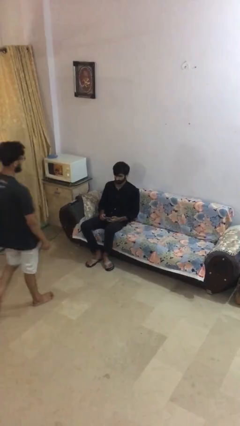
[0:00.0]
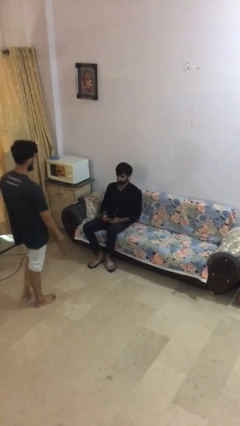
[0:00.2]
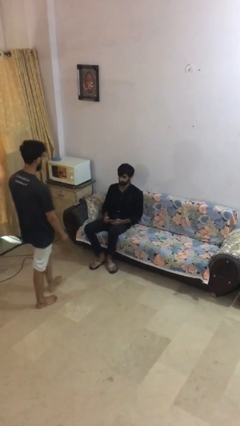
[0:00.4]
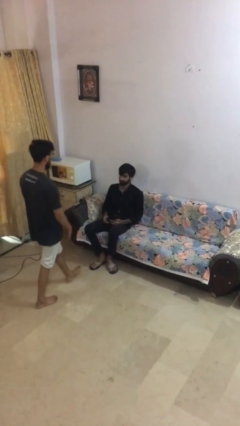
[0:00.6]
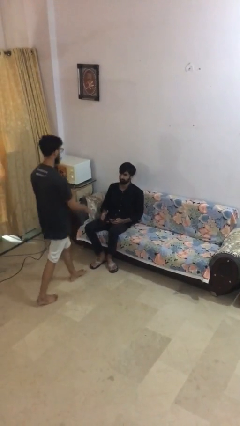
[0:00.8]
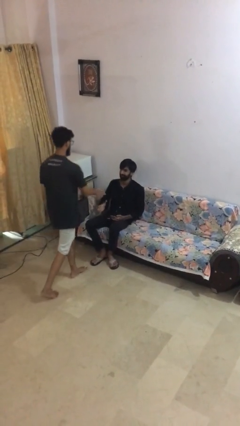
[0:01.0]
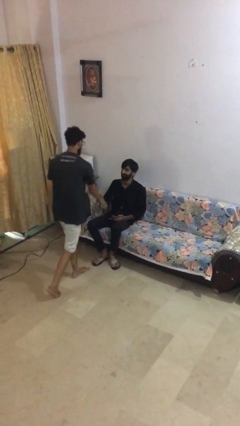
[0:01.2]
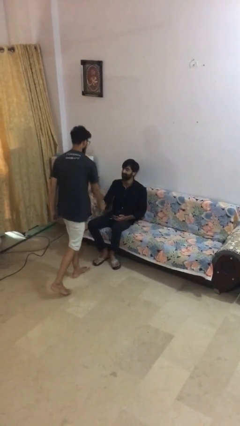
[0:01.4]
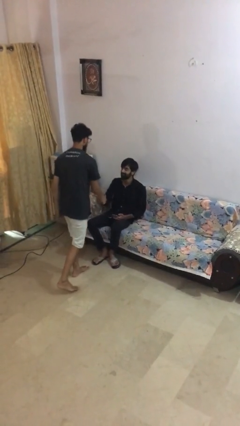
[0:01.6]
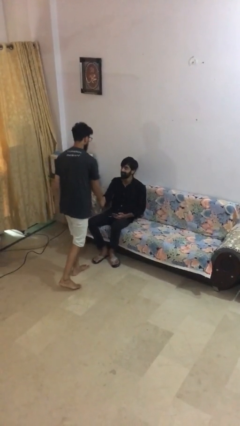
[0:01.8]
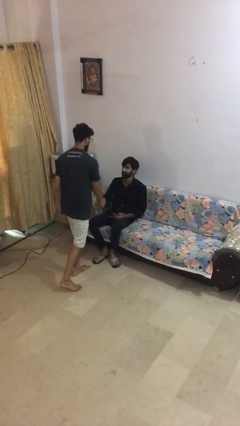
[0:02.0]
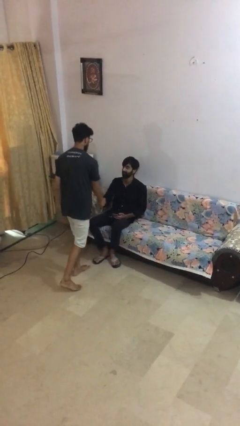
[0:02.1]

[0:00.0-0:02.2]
person shakes hand

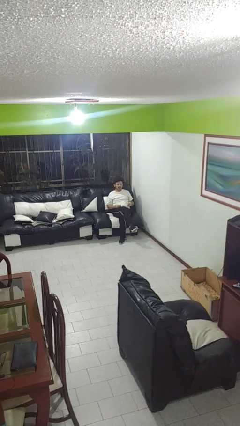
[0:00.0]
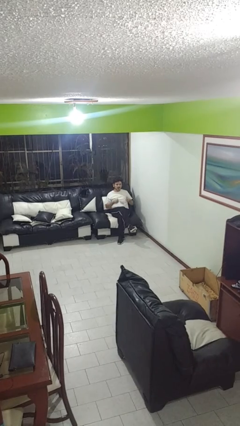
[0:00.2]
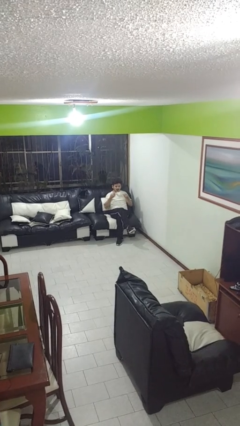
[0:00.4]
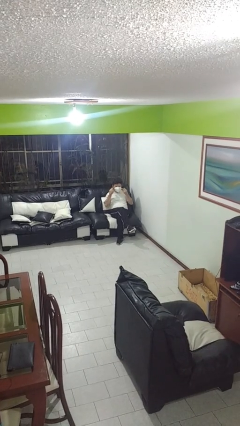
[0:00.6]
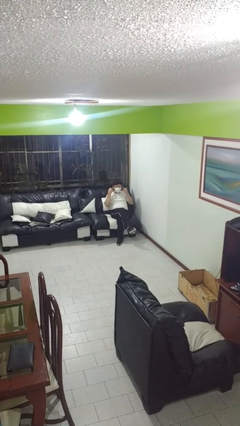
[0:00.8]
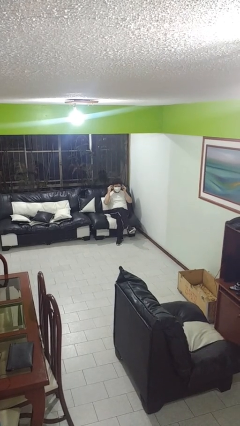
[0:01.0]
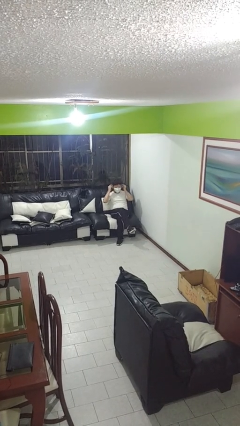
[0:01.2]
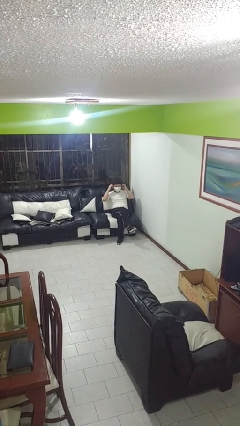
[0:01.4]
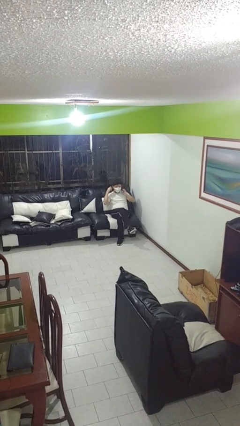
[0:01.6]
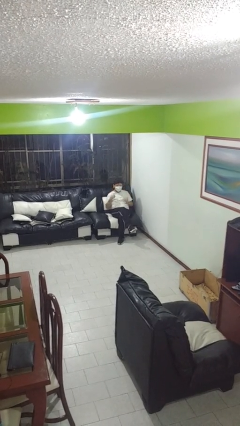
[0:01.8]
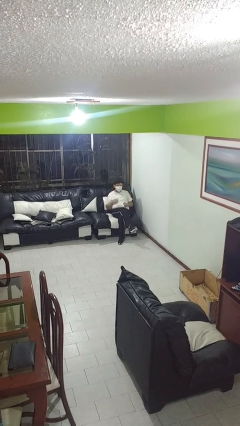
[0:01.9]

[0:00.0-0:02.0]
person puts on facemask

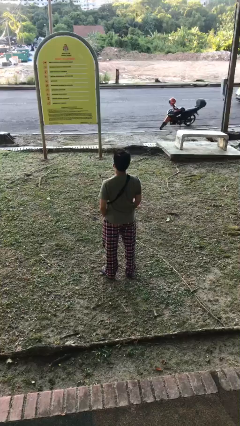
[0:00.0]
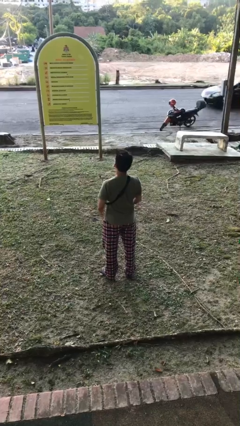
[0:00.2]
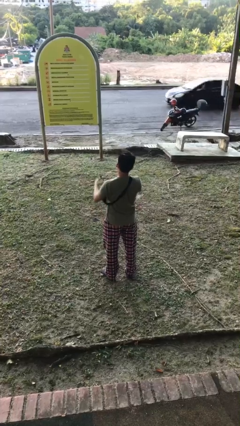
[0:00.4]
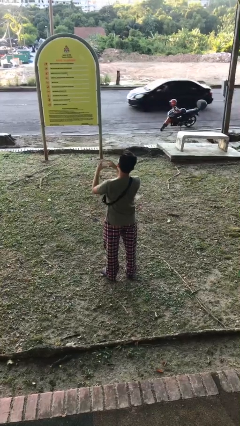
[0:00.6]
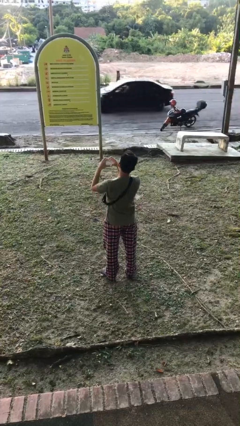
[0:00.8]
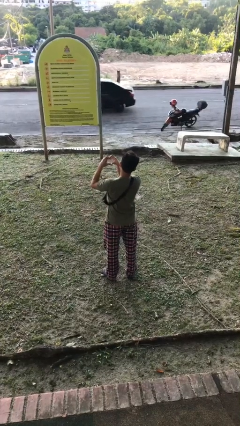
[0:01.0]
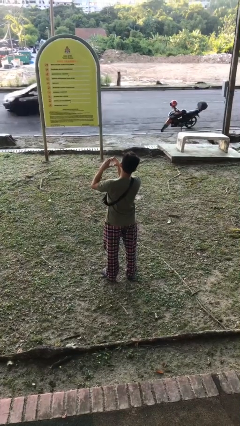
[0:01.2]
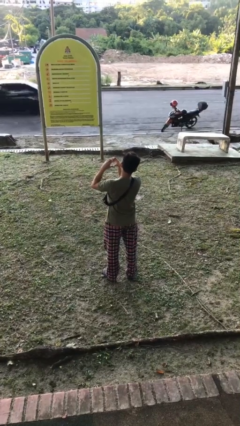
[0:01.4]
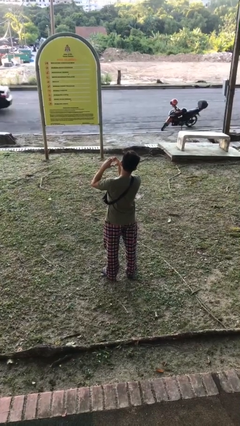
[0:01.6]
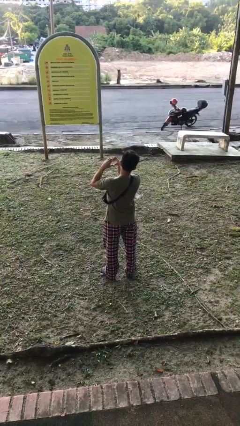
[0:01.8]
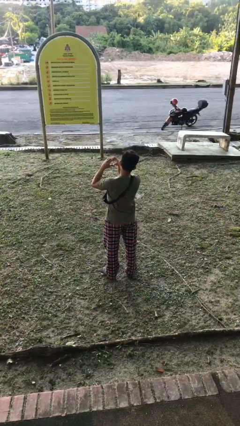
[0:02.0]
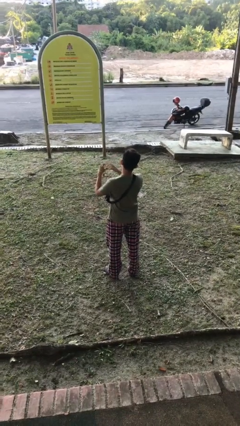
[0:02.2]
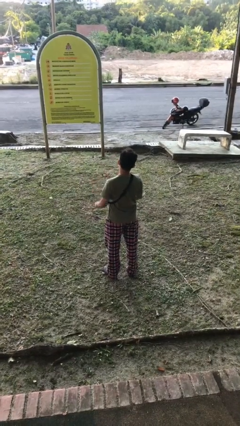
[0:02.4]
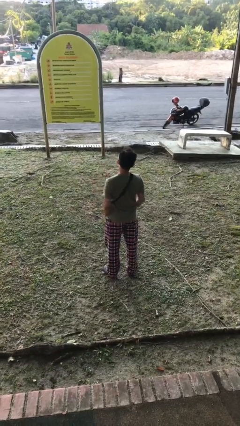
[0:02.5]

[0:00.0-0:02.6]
person gestures heart

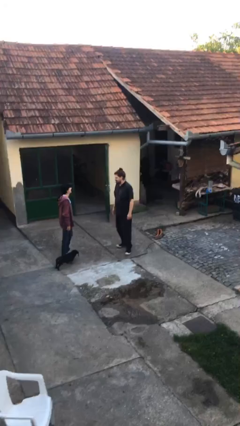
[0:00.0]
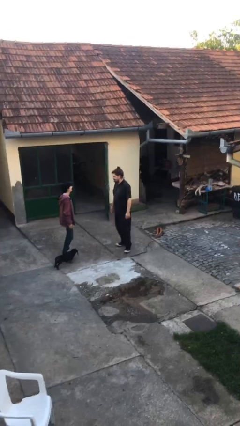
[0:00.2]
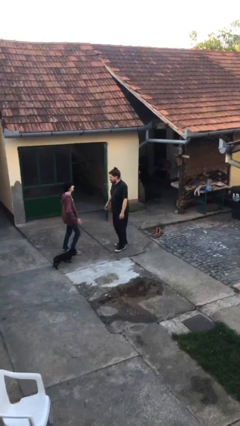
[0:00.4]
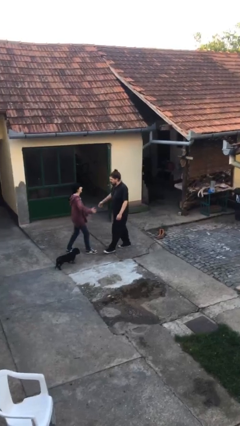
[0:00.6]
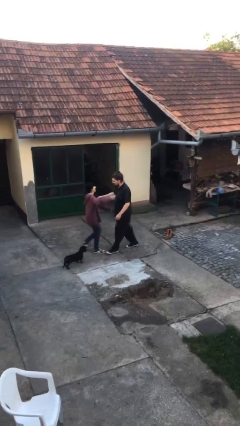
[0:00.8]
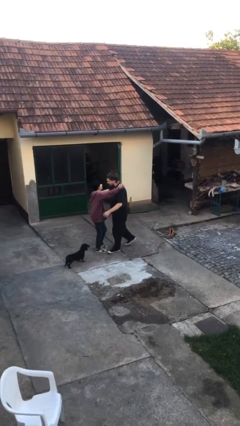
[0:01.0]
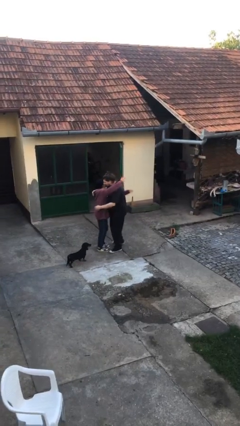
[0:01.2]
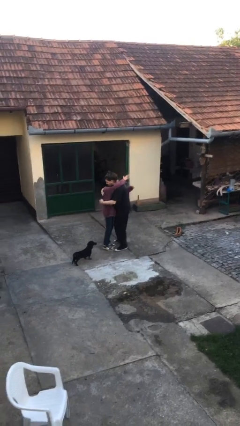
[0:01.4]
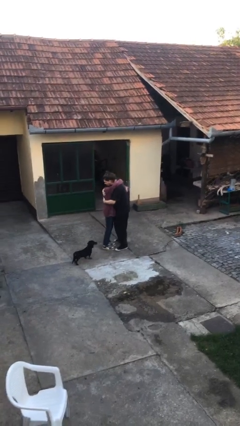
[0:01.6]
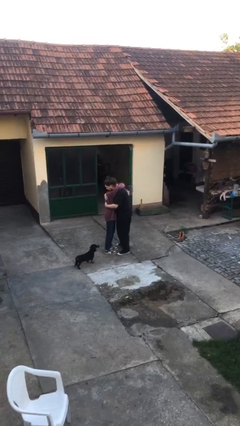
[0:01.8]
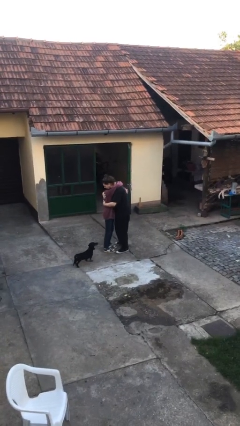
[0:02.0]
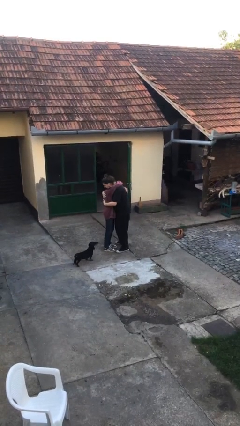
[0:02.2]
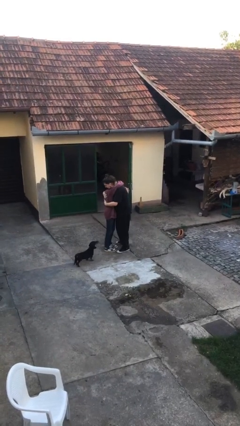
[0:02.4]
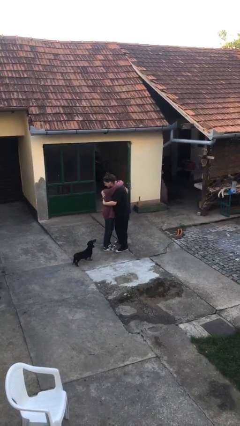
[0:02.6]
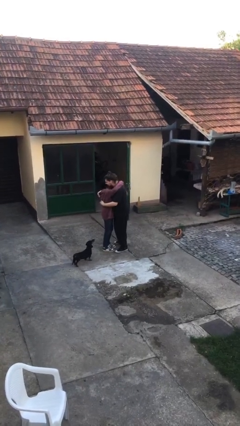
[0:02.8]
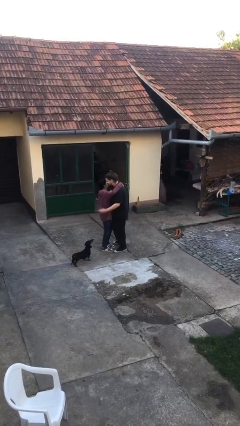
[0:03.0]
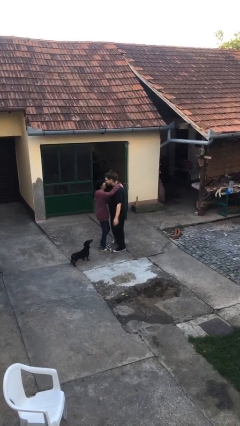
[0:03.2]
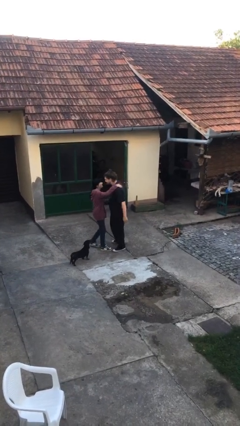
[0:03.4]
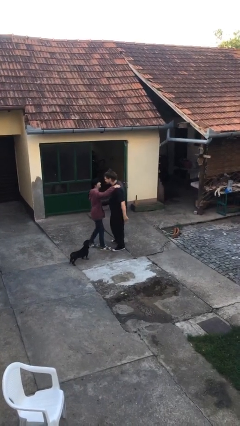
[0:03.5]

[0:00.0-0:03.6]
person embraces person

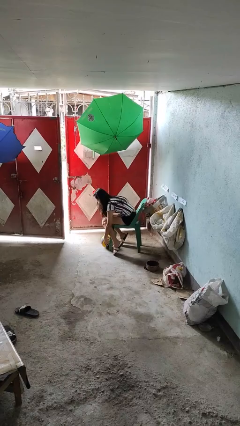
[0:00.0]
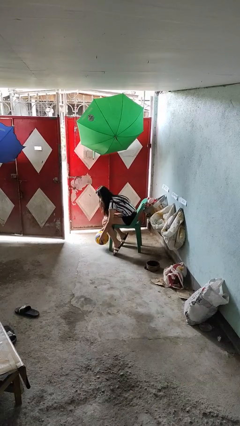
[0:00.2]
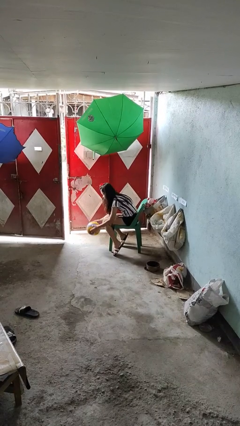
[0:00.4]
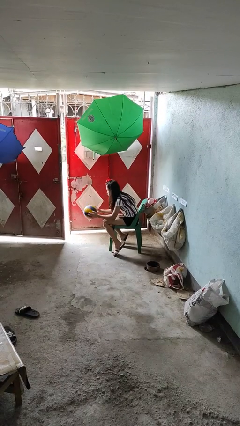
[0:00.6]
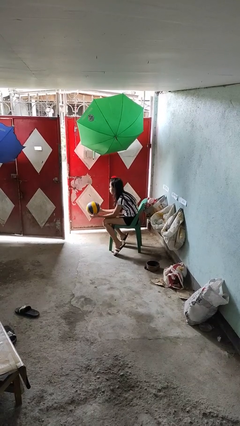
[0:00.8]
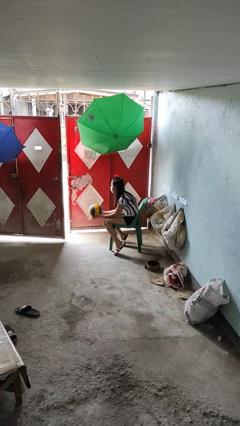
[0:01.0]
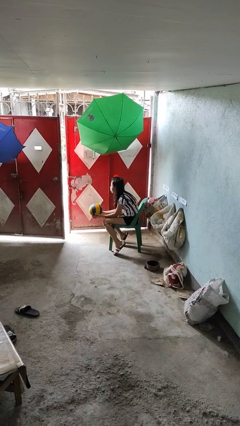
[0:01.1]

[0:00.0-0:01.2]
person picks up object from floor

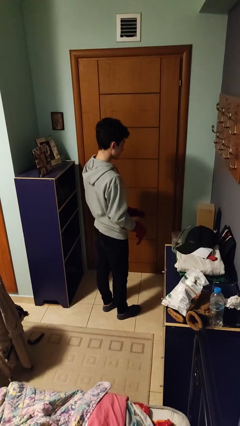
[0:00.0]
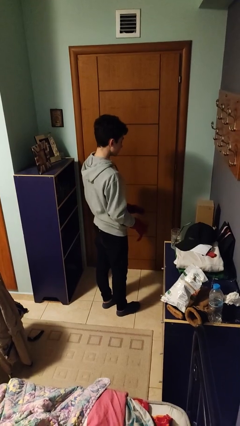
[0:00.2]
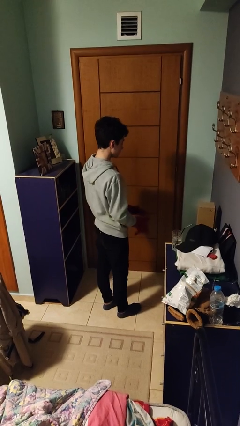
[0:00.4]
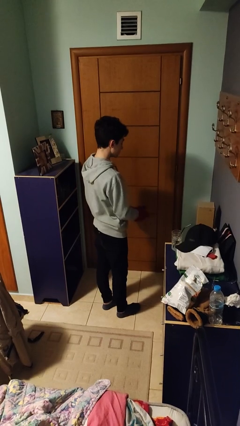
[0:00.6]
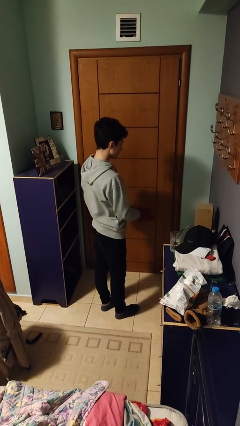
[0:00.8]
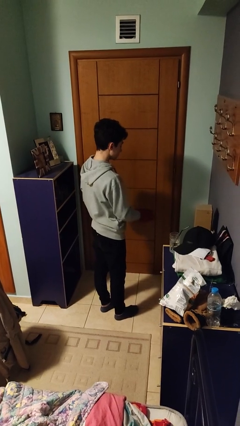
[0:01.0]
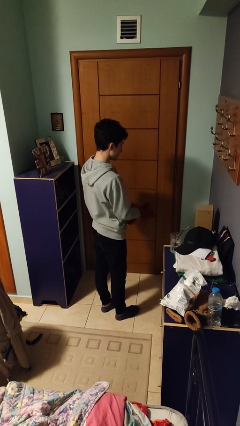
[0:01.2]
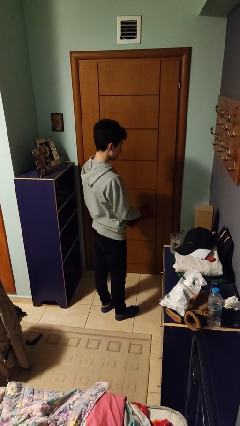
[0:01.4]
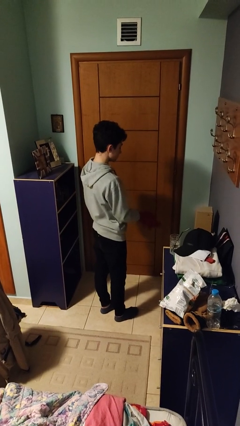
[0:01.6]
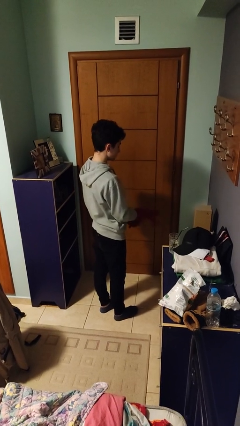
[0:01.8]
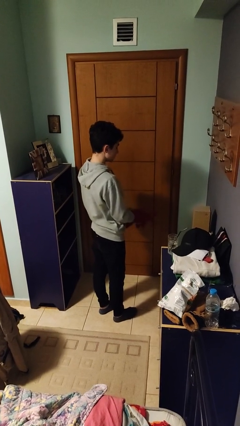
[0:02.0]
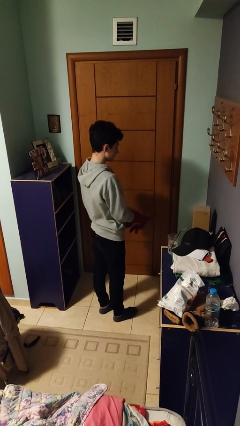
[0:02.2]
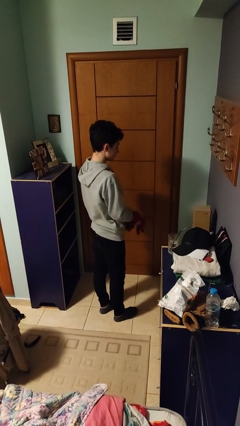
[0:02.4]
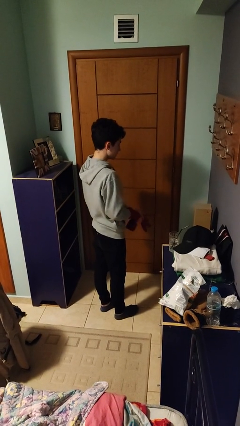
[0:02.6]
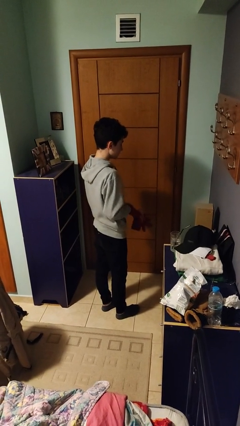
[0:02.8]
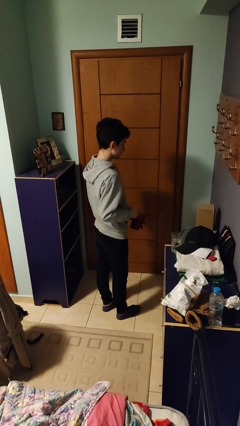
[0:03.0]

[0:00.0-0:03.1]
person takes off gloves

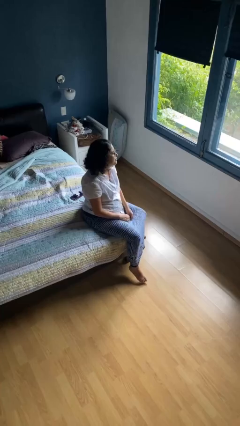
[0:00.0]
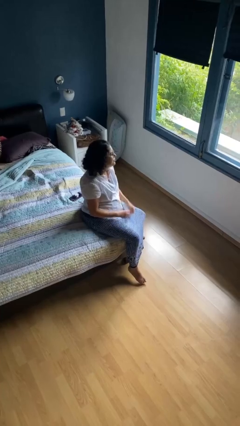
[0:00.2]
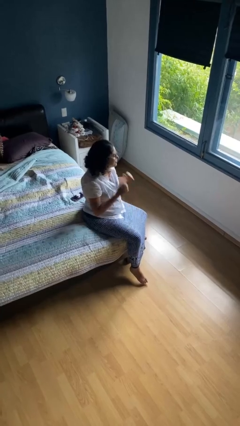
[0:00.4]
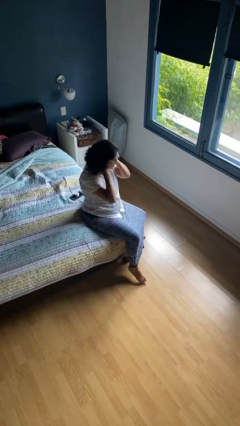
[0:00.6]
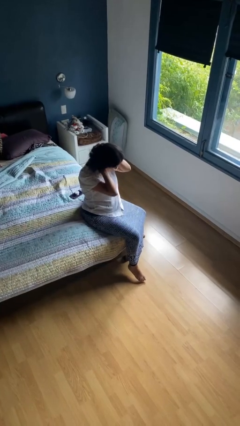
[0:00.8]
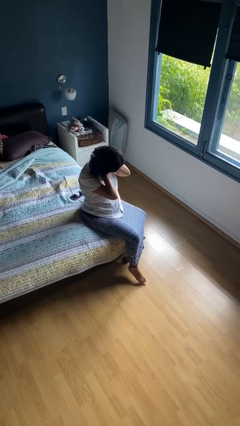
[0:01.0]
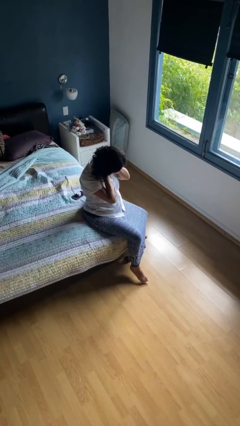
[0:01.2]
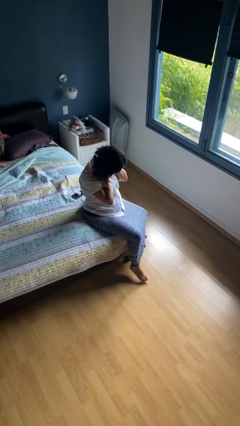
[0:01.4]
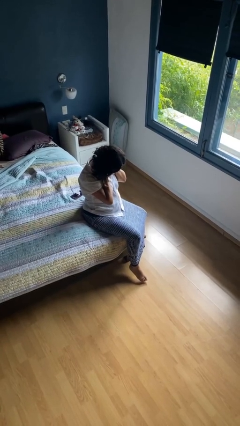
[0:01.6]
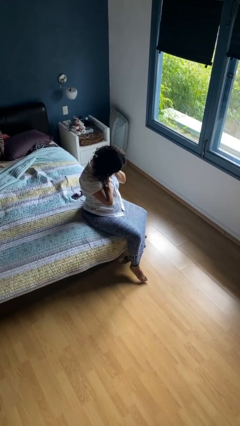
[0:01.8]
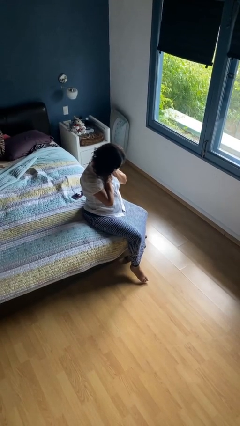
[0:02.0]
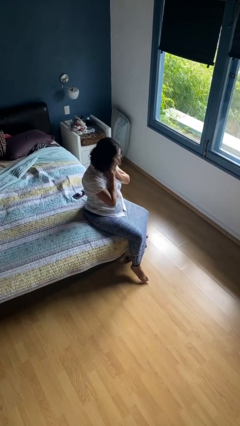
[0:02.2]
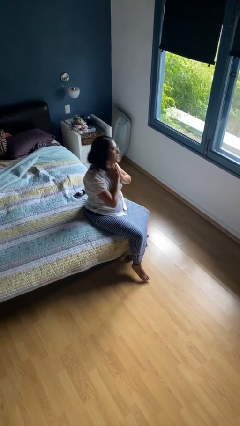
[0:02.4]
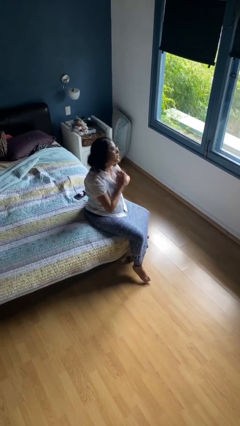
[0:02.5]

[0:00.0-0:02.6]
person rubs neck
